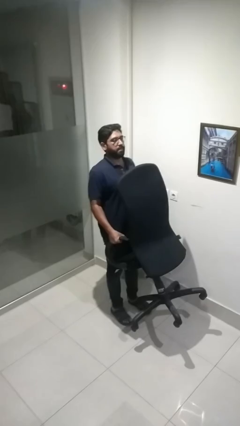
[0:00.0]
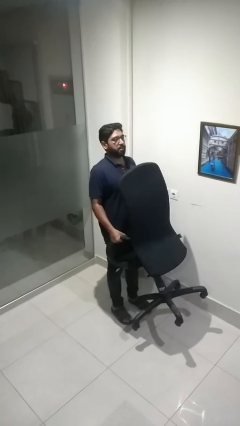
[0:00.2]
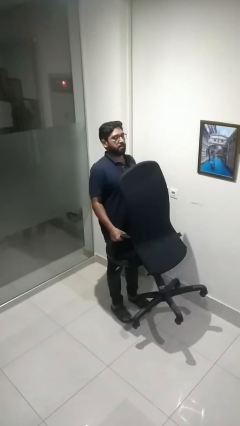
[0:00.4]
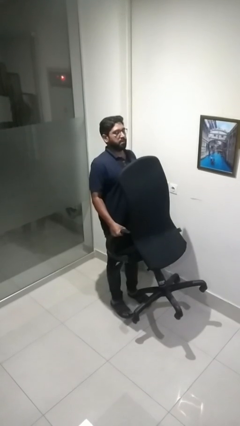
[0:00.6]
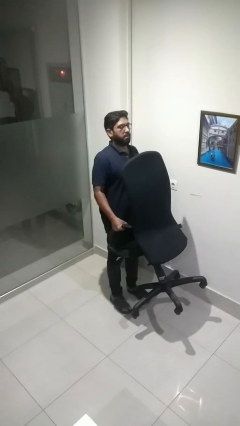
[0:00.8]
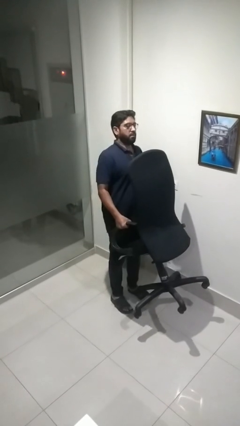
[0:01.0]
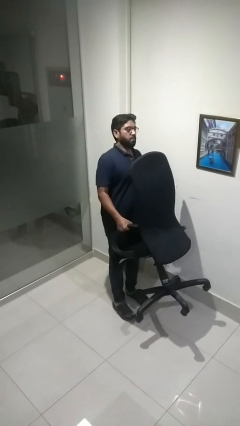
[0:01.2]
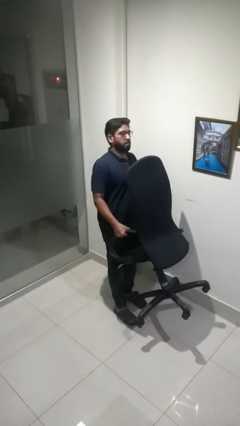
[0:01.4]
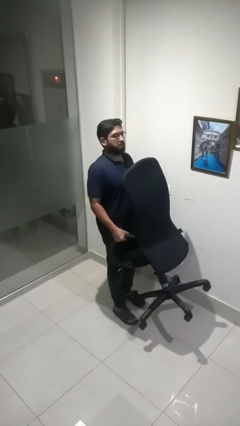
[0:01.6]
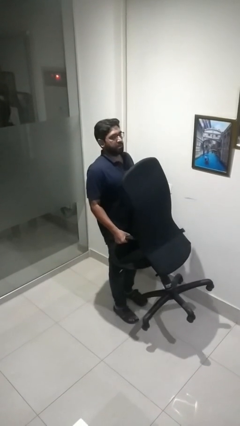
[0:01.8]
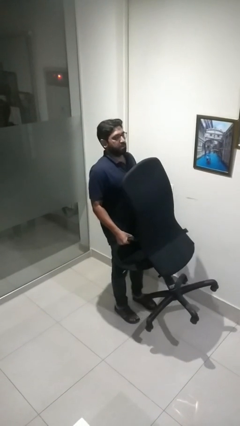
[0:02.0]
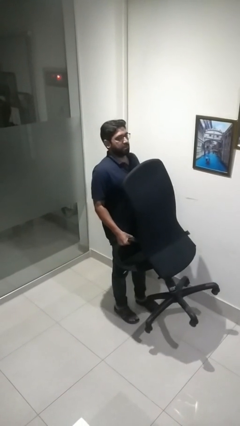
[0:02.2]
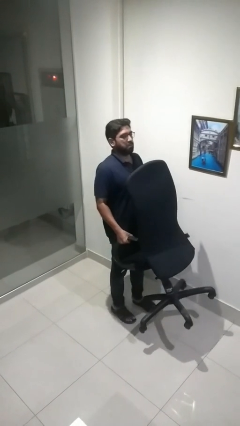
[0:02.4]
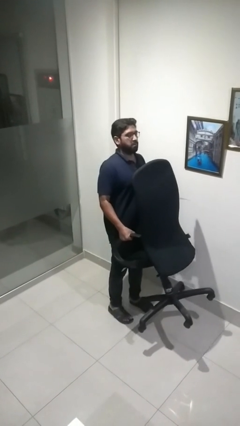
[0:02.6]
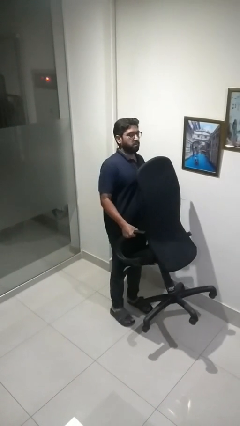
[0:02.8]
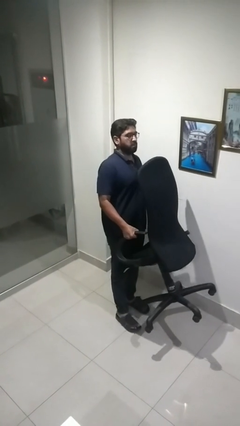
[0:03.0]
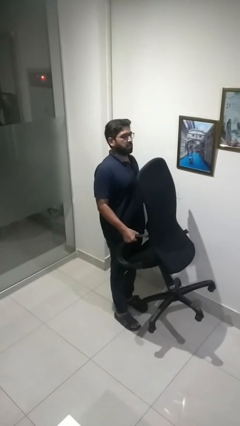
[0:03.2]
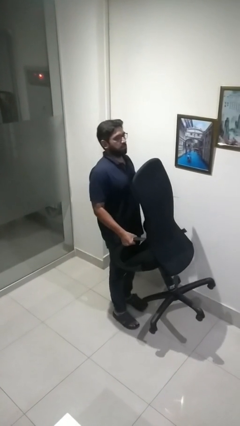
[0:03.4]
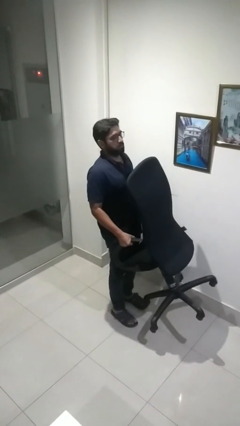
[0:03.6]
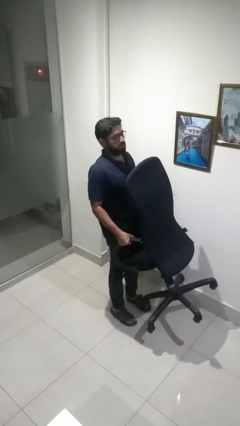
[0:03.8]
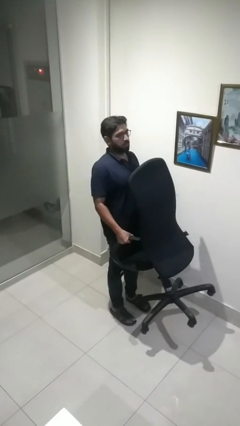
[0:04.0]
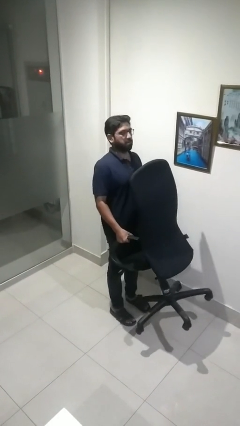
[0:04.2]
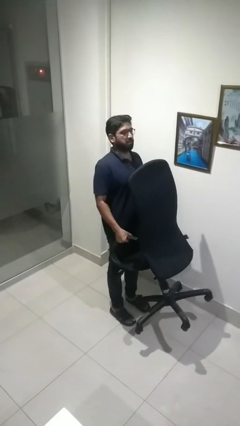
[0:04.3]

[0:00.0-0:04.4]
person carries furniture

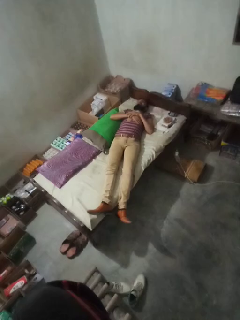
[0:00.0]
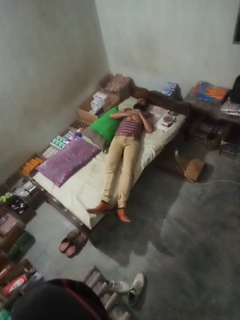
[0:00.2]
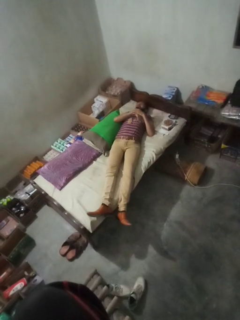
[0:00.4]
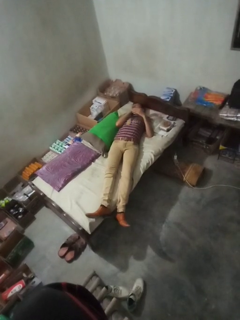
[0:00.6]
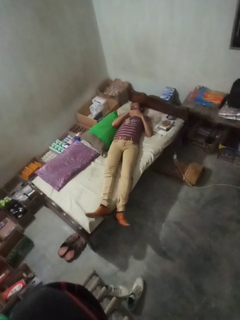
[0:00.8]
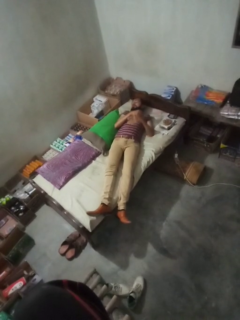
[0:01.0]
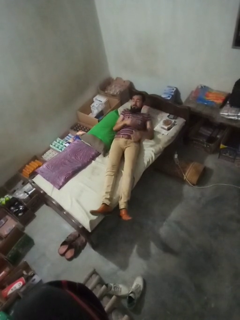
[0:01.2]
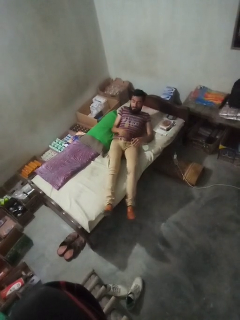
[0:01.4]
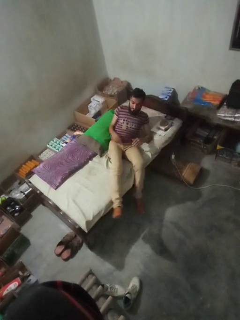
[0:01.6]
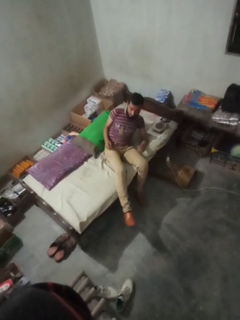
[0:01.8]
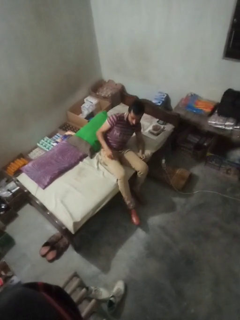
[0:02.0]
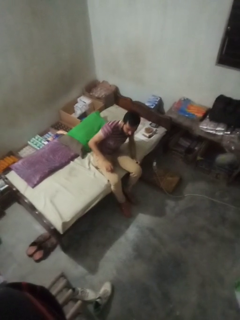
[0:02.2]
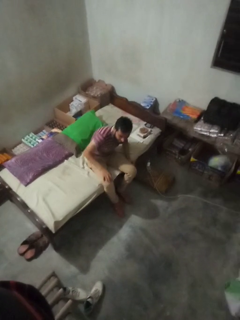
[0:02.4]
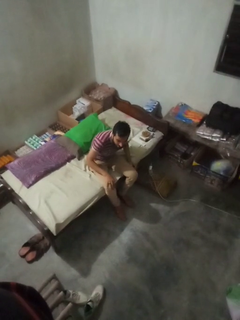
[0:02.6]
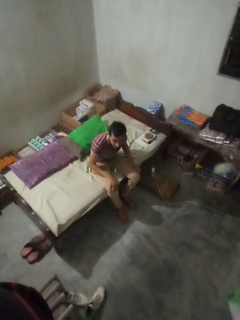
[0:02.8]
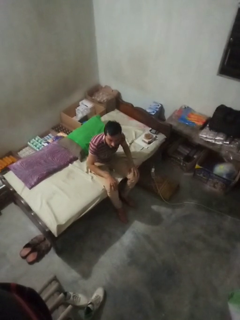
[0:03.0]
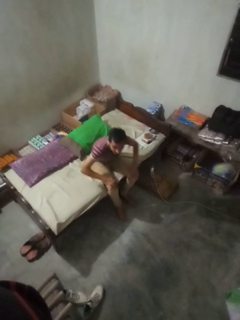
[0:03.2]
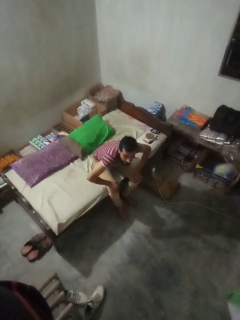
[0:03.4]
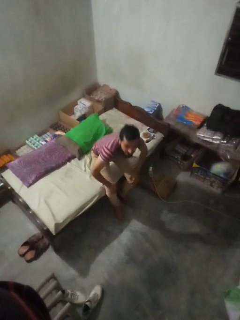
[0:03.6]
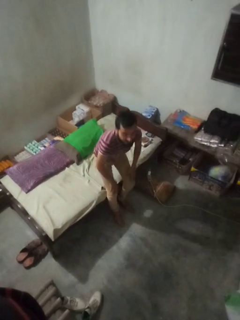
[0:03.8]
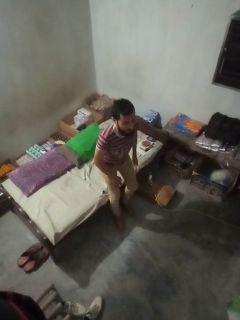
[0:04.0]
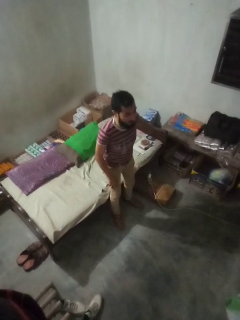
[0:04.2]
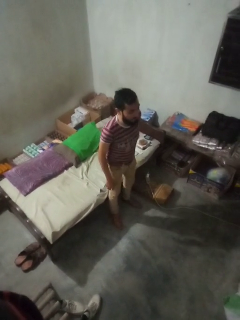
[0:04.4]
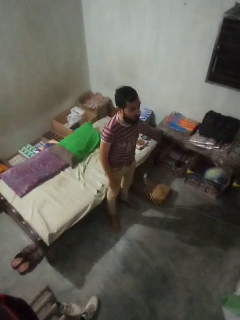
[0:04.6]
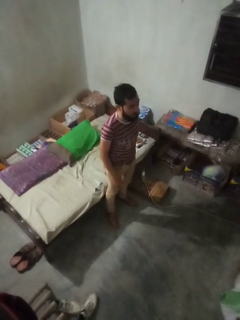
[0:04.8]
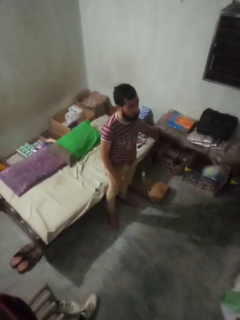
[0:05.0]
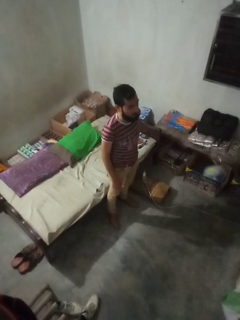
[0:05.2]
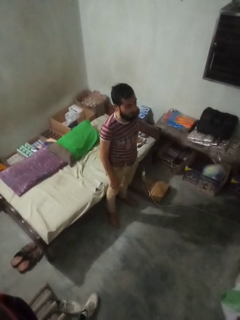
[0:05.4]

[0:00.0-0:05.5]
person stands up

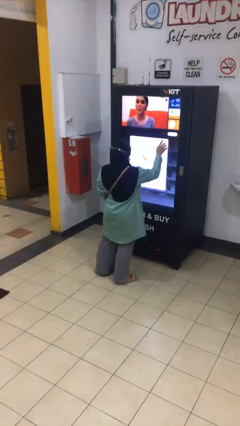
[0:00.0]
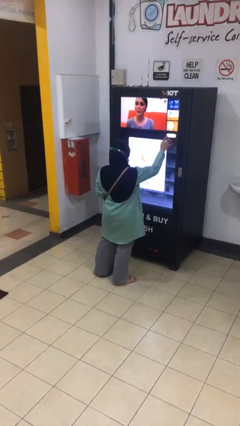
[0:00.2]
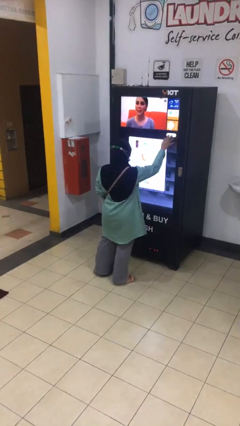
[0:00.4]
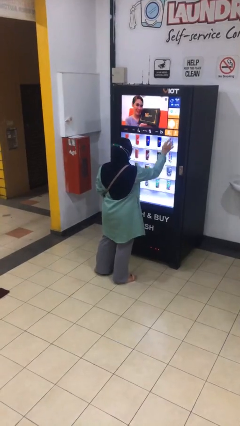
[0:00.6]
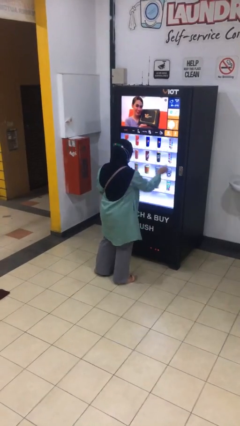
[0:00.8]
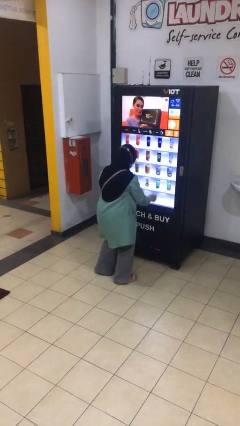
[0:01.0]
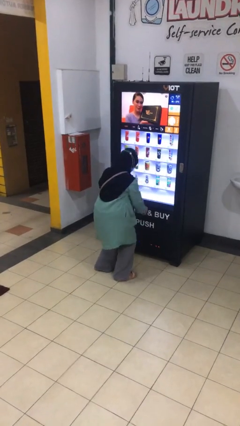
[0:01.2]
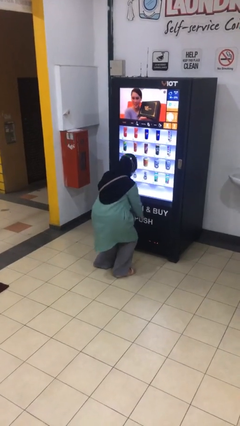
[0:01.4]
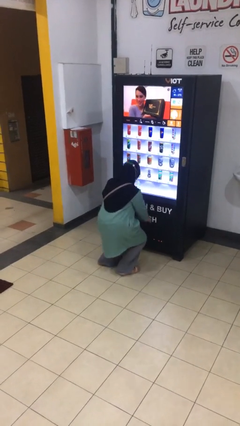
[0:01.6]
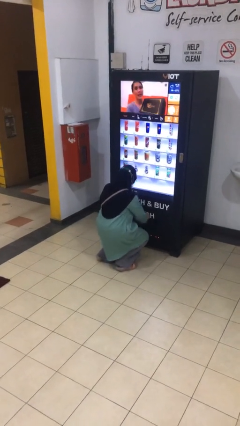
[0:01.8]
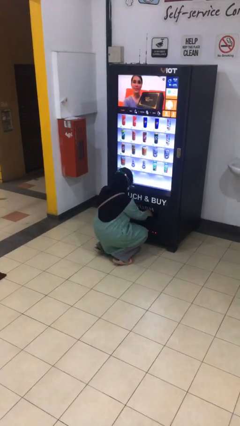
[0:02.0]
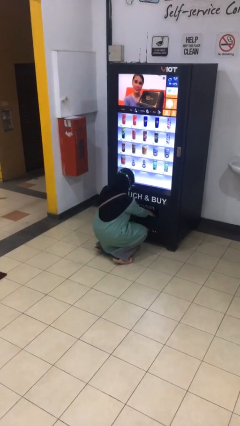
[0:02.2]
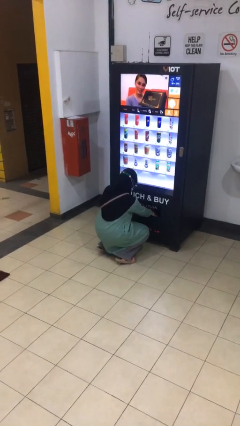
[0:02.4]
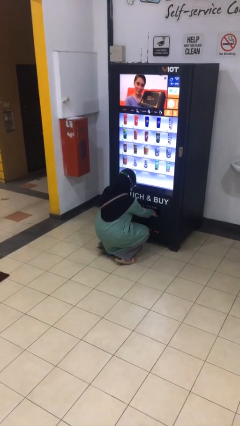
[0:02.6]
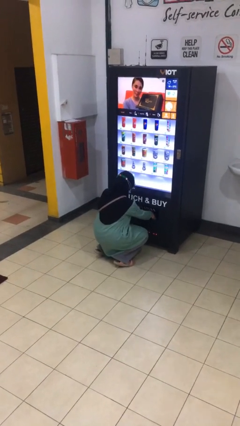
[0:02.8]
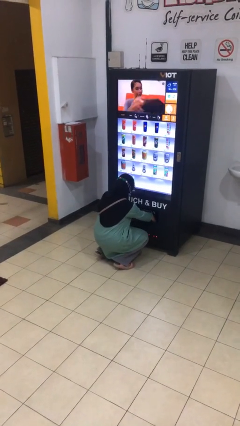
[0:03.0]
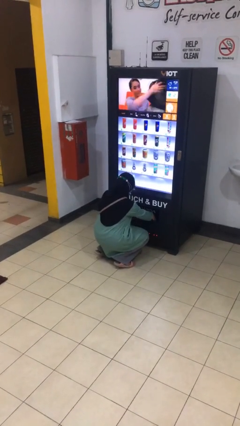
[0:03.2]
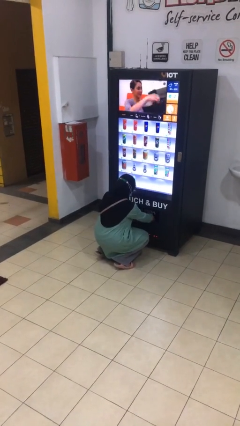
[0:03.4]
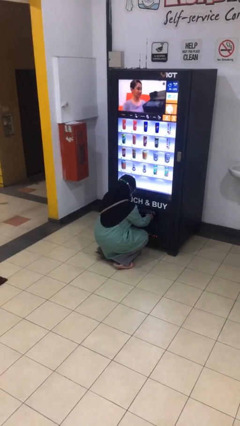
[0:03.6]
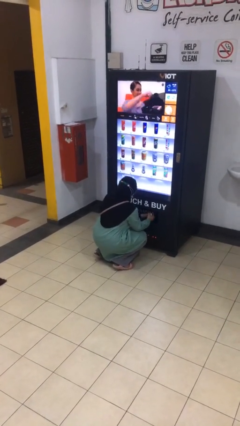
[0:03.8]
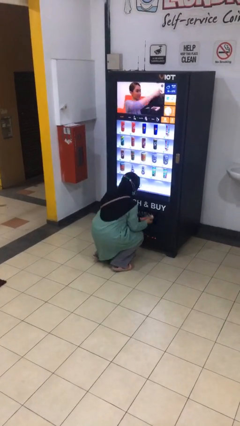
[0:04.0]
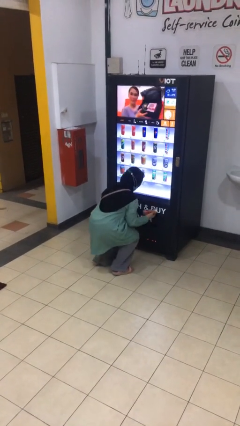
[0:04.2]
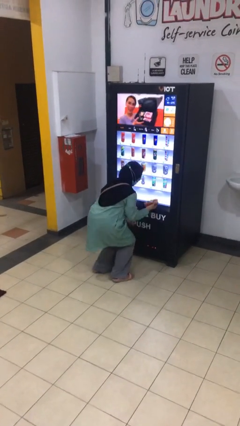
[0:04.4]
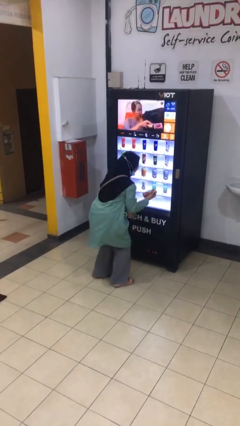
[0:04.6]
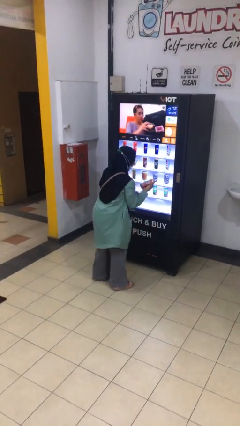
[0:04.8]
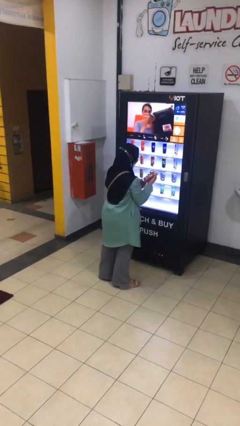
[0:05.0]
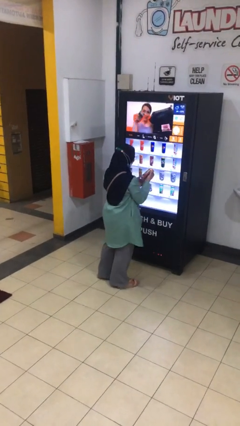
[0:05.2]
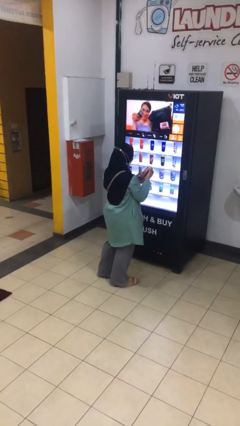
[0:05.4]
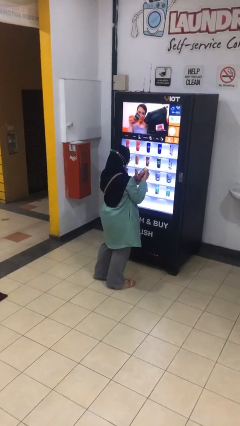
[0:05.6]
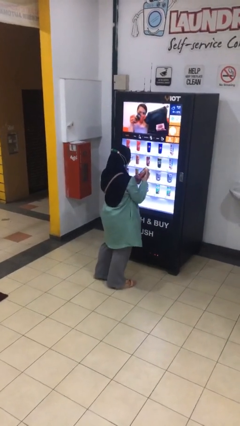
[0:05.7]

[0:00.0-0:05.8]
person purchases from machine

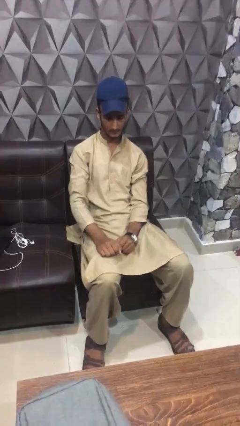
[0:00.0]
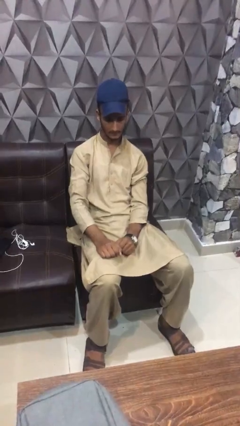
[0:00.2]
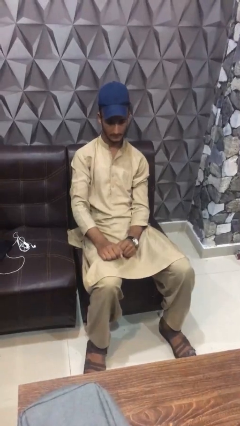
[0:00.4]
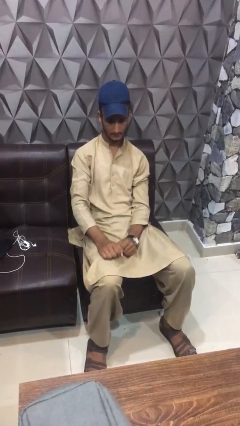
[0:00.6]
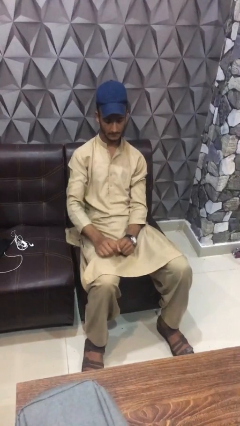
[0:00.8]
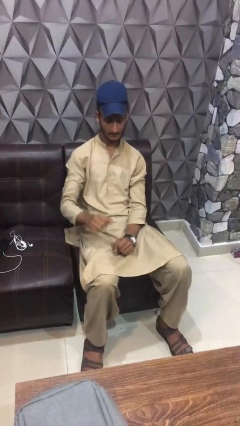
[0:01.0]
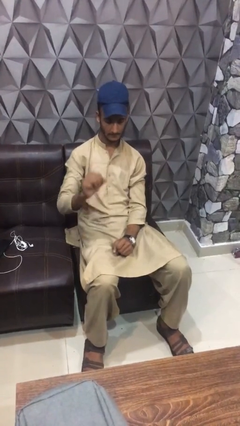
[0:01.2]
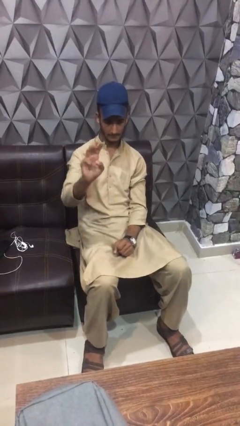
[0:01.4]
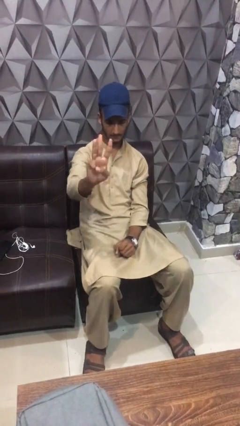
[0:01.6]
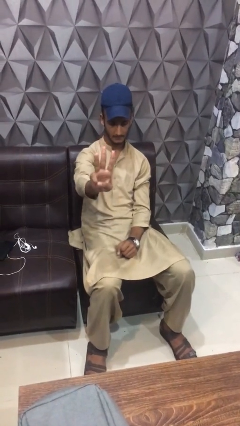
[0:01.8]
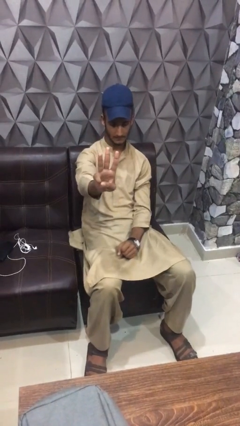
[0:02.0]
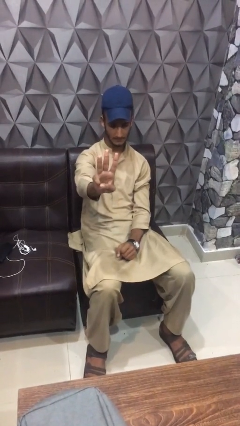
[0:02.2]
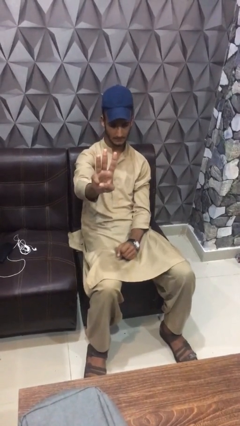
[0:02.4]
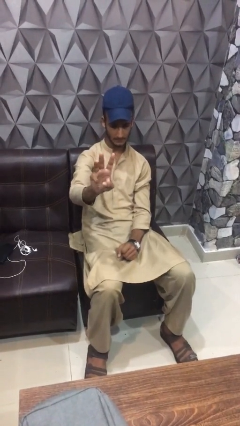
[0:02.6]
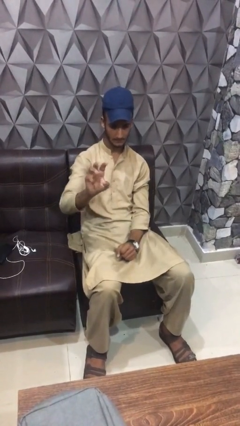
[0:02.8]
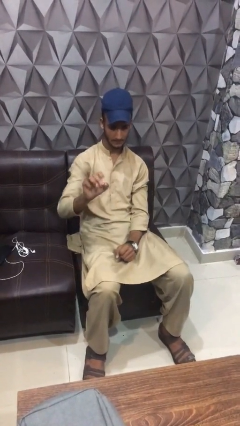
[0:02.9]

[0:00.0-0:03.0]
person gestures number three

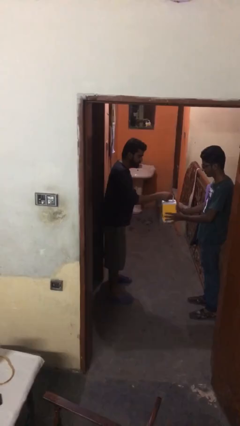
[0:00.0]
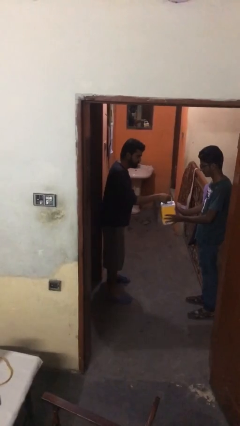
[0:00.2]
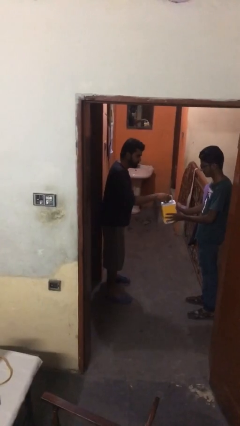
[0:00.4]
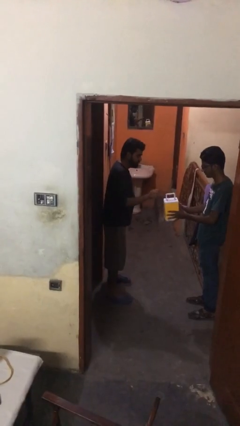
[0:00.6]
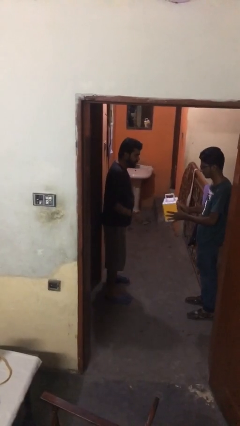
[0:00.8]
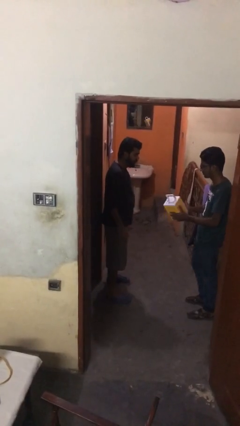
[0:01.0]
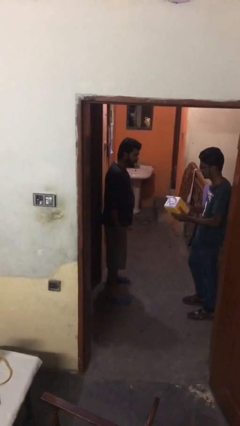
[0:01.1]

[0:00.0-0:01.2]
person transfers object to person
